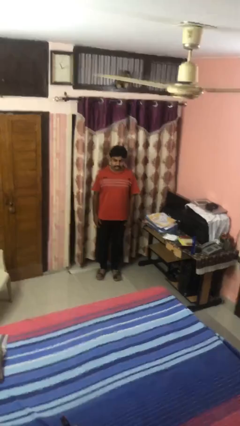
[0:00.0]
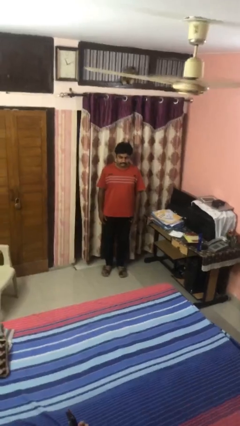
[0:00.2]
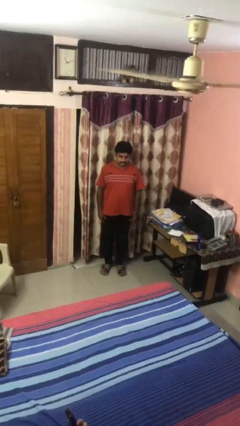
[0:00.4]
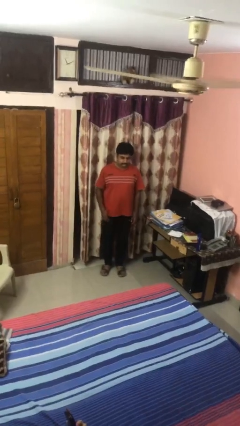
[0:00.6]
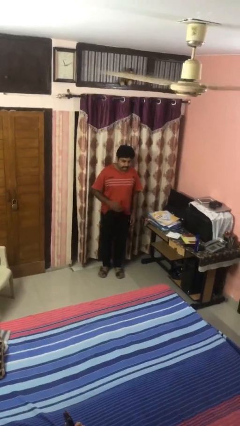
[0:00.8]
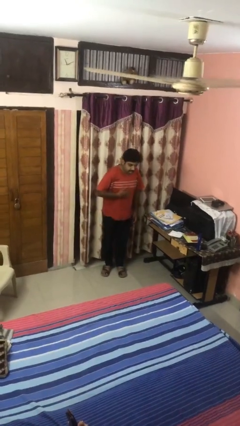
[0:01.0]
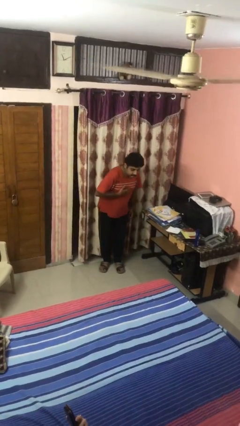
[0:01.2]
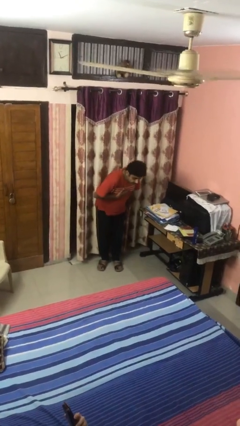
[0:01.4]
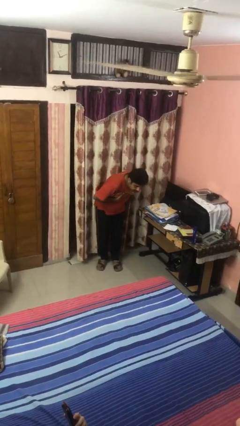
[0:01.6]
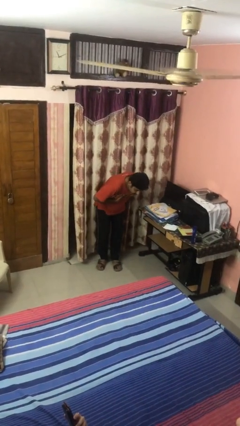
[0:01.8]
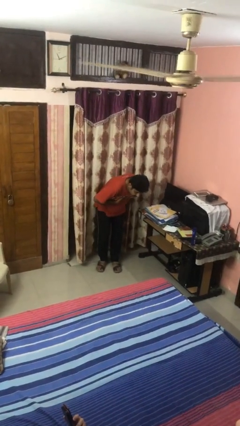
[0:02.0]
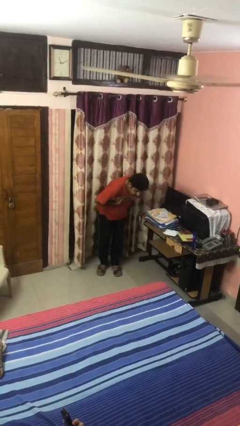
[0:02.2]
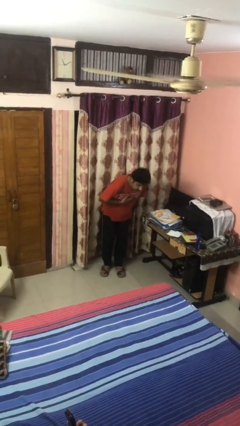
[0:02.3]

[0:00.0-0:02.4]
person bows

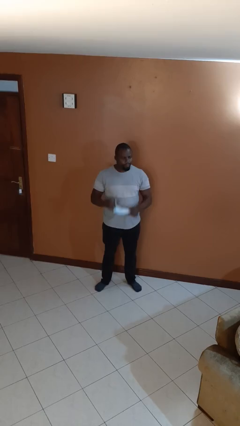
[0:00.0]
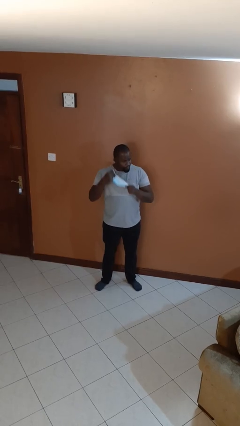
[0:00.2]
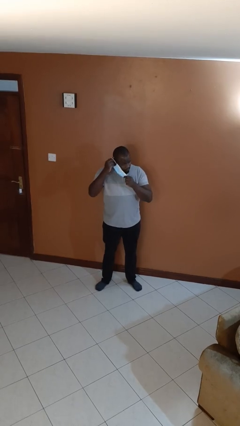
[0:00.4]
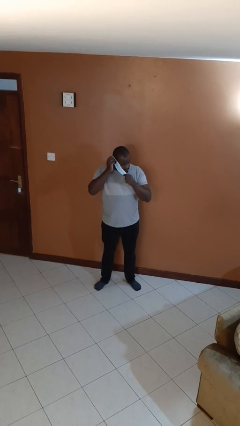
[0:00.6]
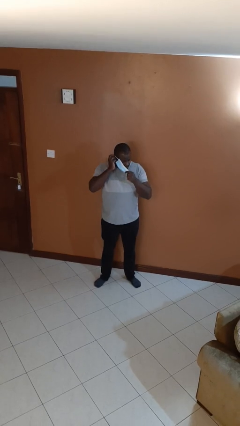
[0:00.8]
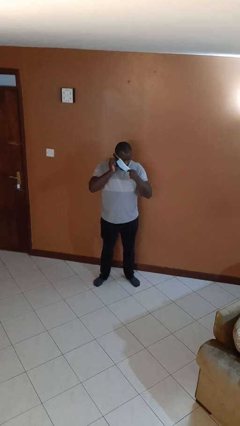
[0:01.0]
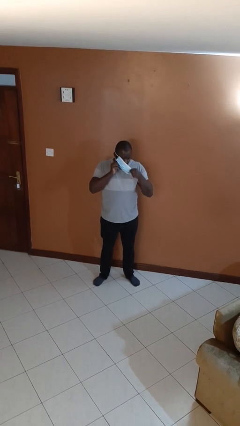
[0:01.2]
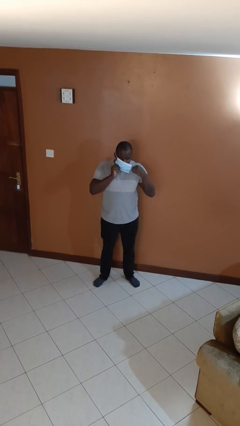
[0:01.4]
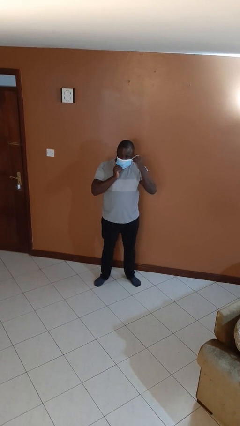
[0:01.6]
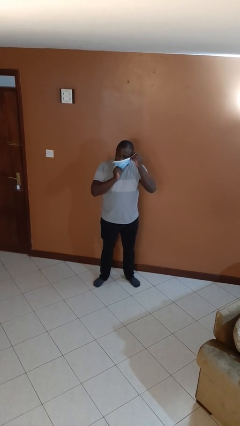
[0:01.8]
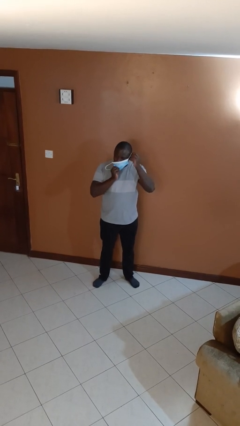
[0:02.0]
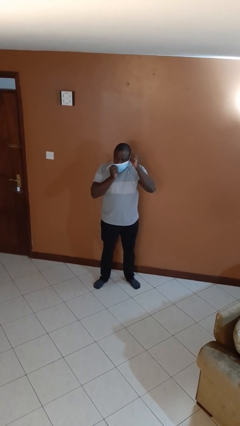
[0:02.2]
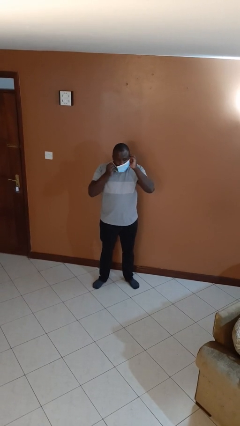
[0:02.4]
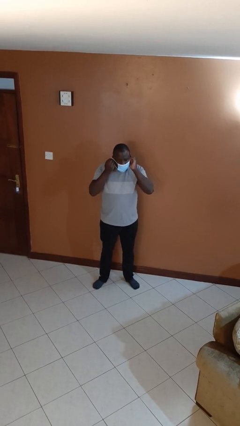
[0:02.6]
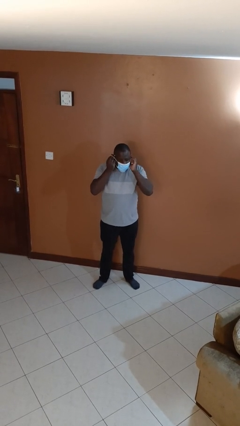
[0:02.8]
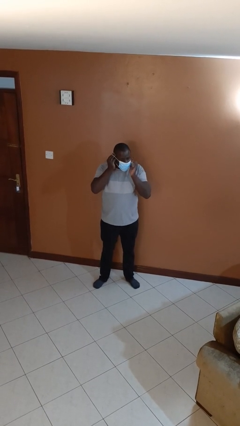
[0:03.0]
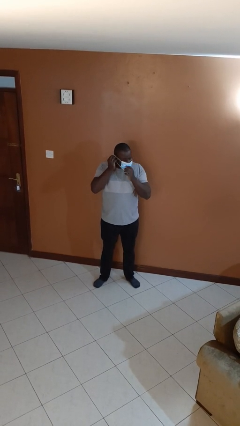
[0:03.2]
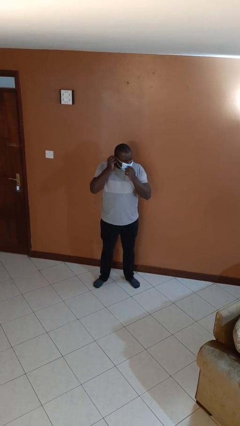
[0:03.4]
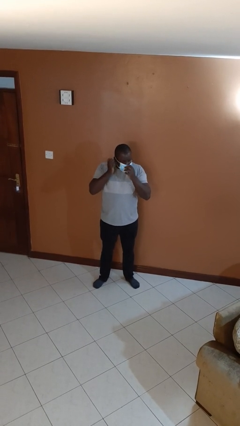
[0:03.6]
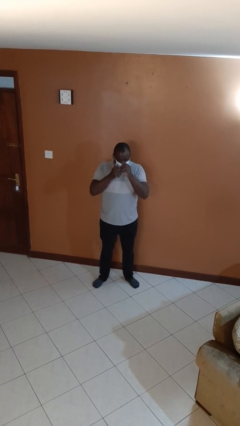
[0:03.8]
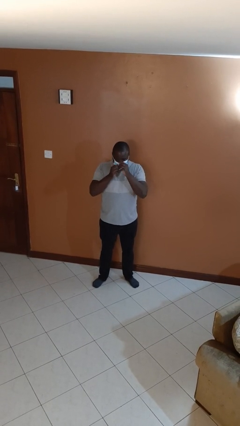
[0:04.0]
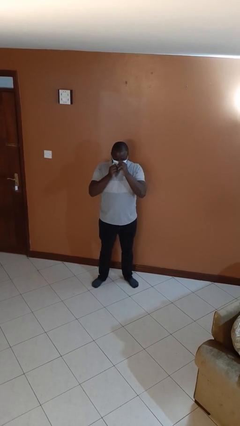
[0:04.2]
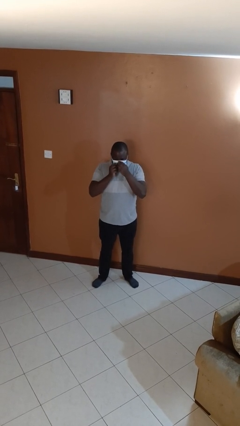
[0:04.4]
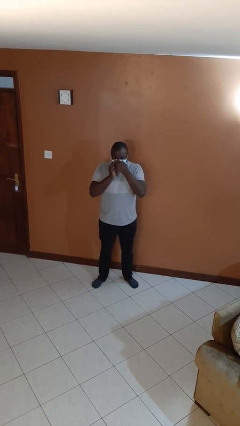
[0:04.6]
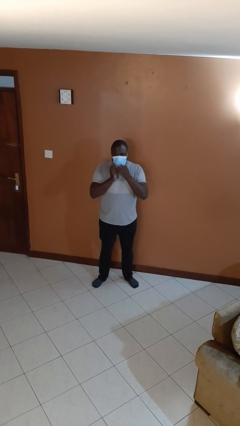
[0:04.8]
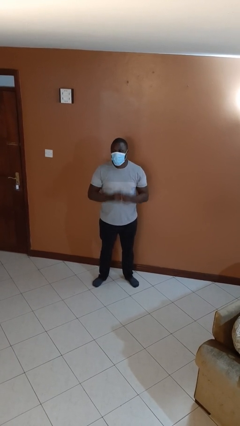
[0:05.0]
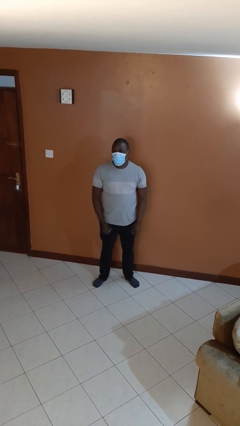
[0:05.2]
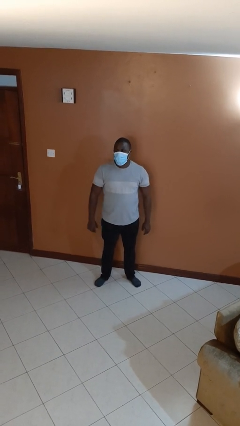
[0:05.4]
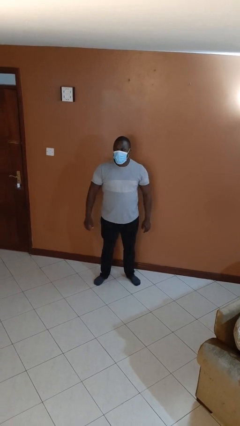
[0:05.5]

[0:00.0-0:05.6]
person puts on facemask

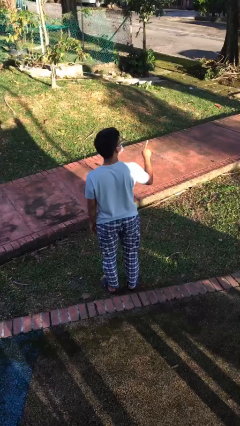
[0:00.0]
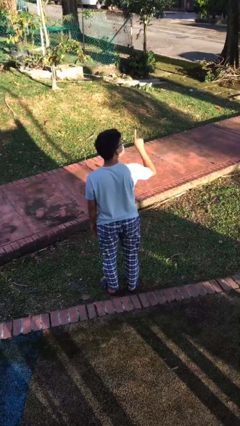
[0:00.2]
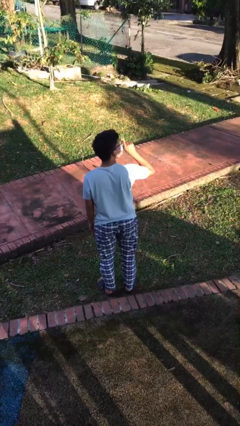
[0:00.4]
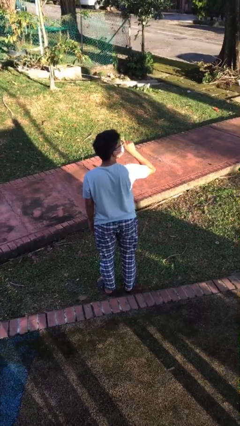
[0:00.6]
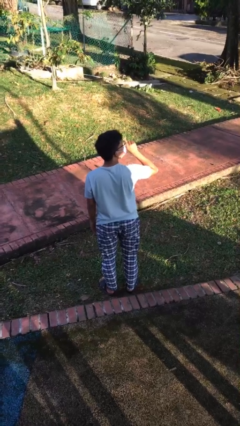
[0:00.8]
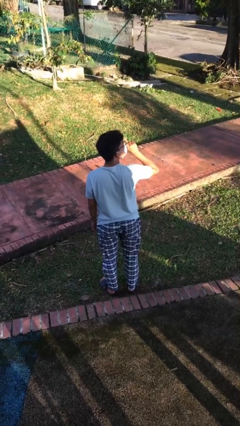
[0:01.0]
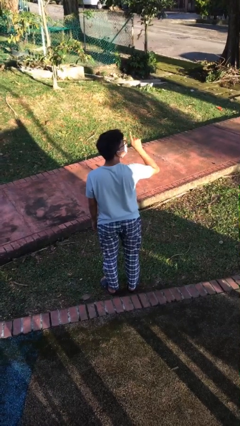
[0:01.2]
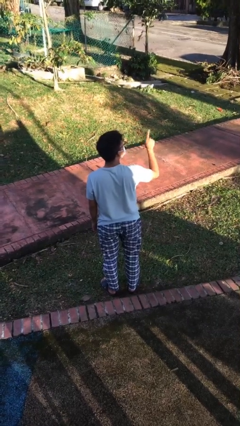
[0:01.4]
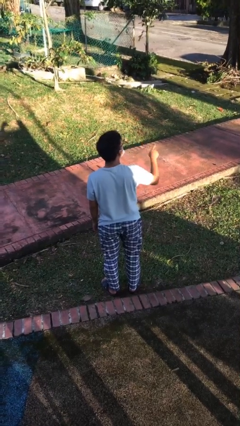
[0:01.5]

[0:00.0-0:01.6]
person gestures be quiet

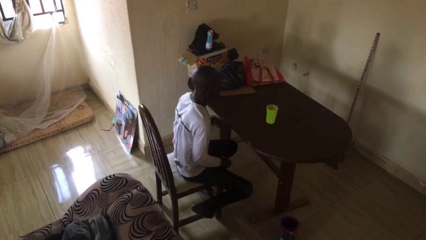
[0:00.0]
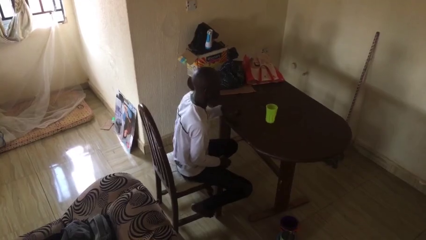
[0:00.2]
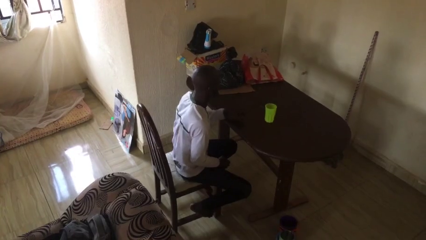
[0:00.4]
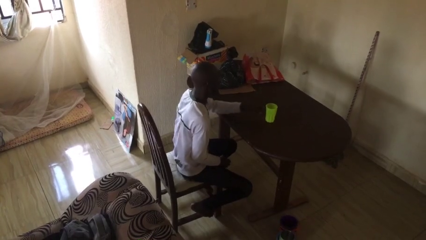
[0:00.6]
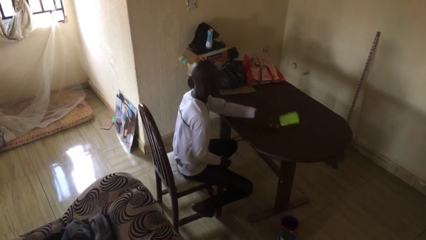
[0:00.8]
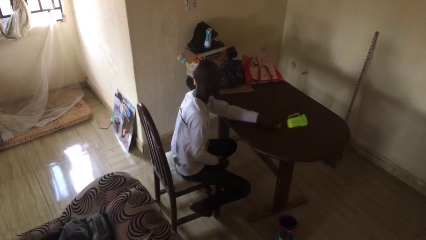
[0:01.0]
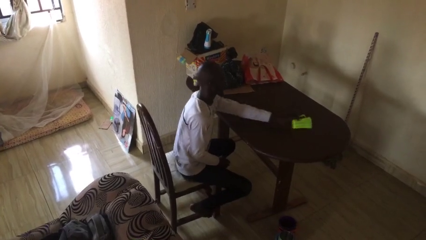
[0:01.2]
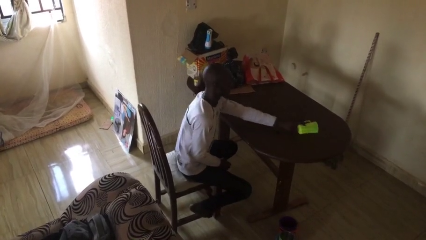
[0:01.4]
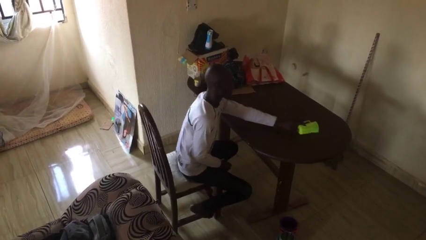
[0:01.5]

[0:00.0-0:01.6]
person knocks over glass

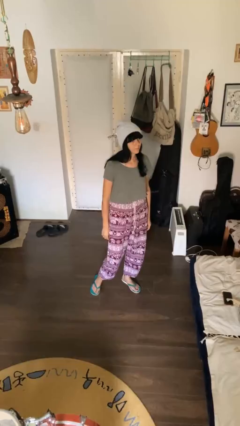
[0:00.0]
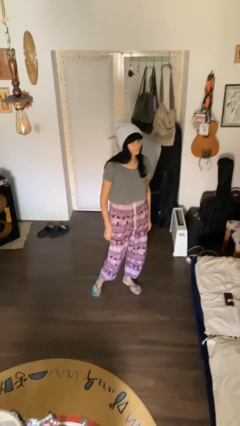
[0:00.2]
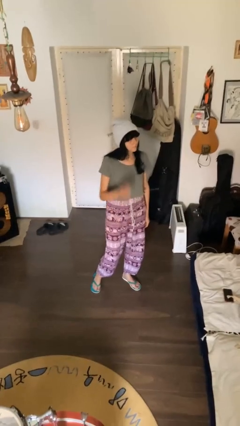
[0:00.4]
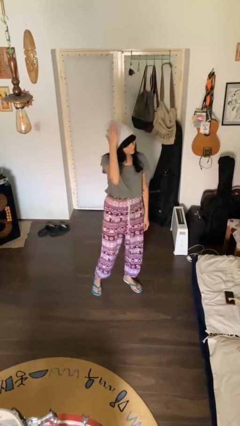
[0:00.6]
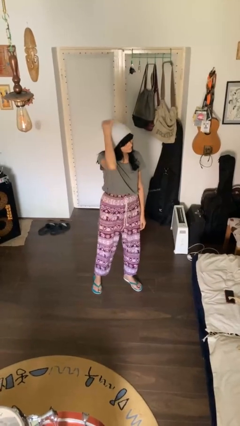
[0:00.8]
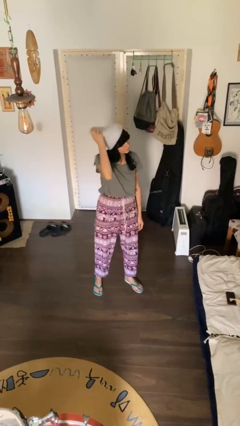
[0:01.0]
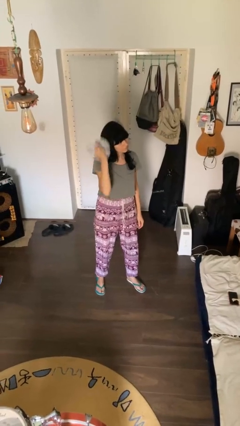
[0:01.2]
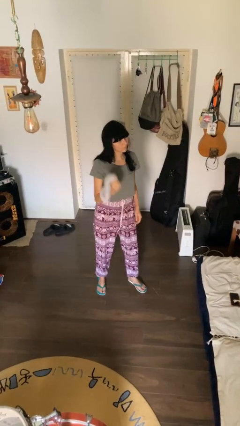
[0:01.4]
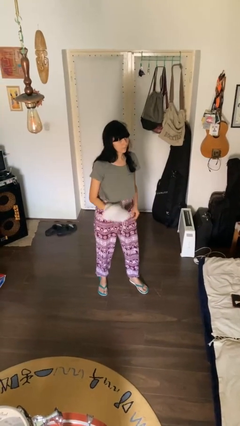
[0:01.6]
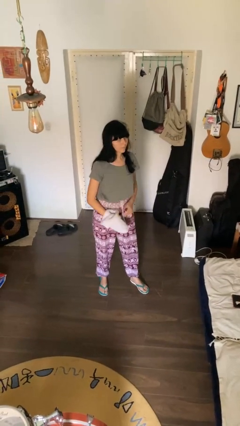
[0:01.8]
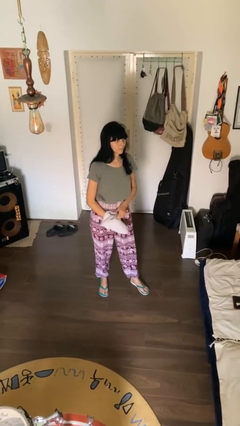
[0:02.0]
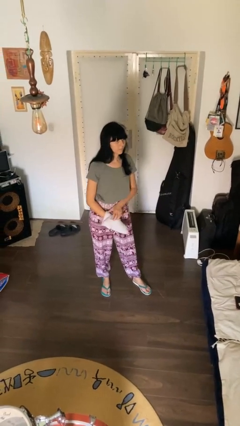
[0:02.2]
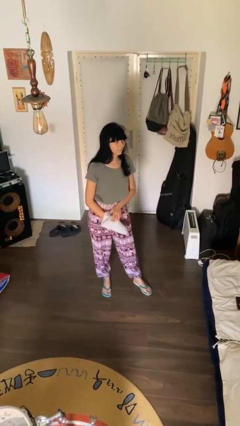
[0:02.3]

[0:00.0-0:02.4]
person takes off hat

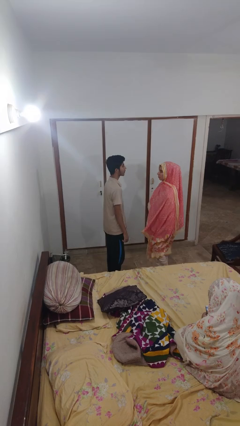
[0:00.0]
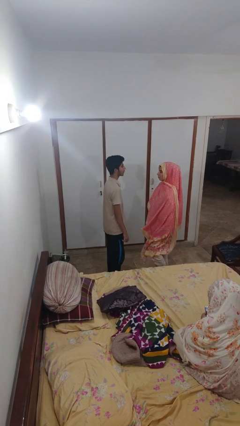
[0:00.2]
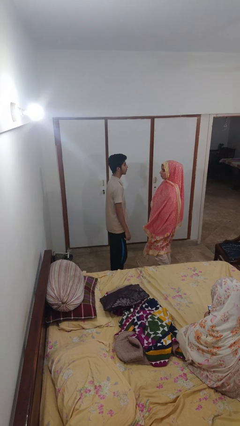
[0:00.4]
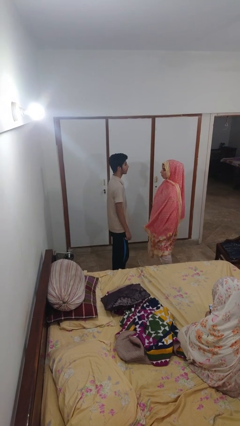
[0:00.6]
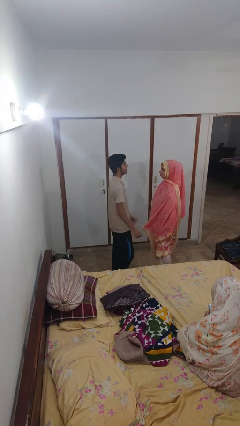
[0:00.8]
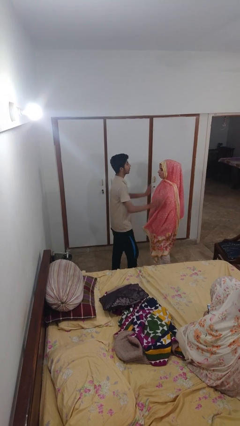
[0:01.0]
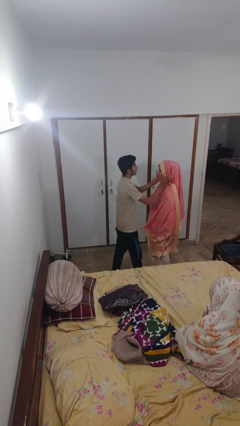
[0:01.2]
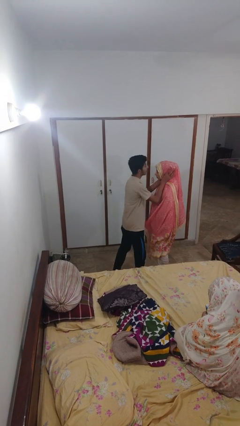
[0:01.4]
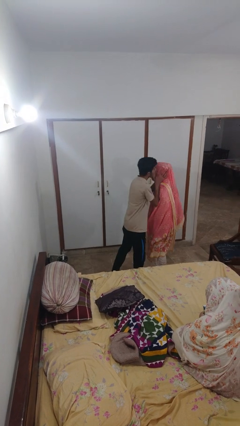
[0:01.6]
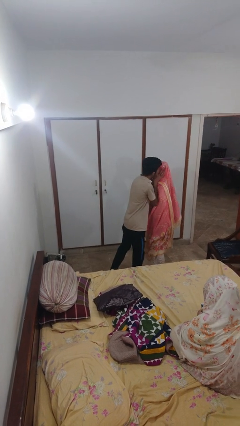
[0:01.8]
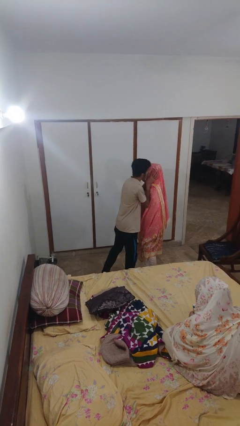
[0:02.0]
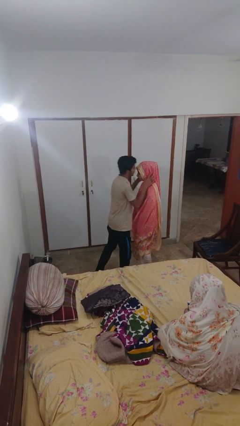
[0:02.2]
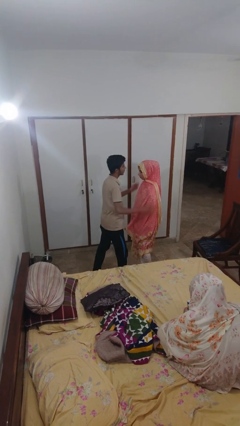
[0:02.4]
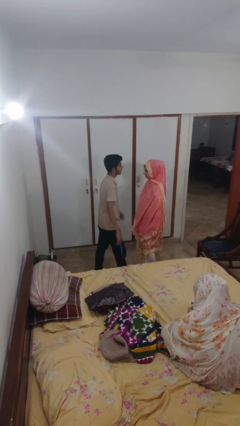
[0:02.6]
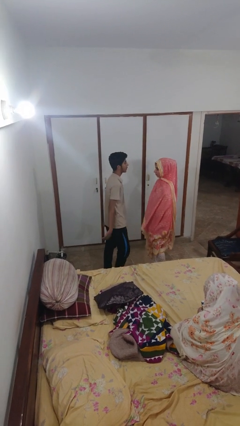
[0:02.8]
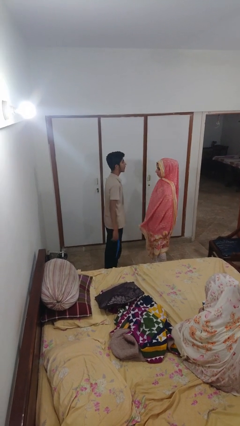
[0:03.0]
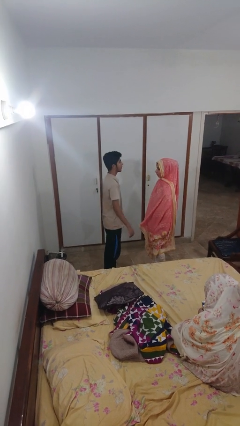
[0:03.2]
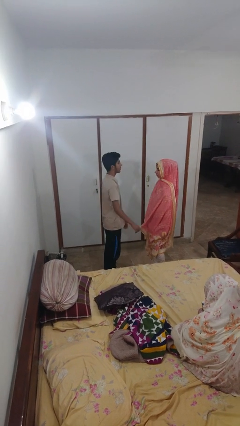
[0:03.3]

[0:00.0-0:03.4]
person kisses cheek of person

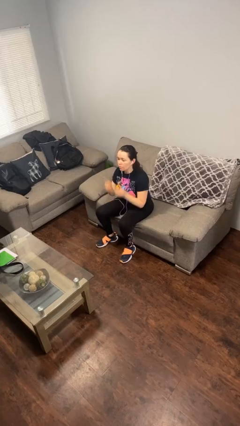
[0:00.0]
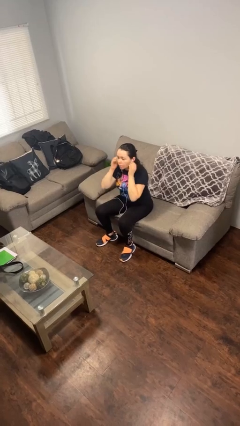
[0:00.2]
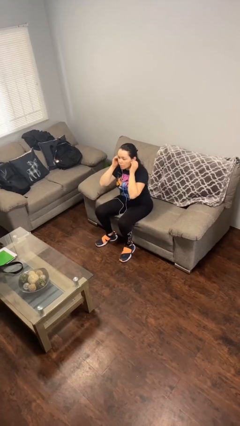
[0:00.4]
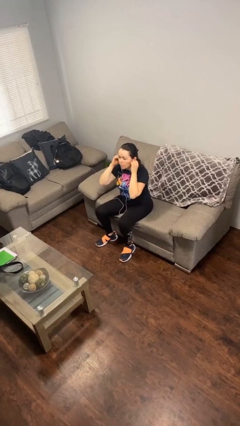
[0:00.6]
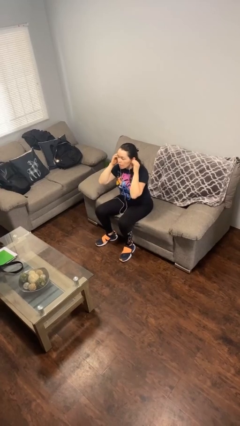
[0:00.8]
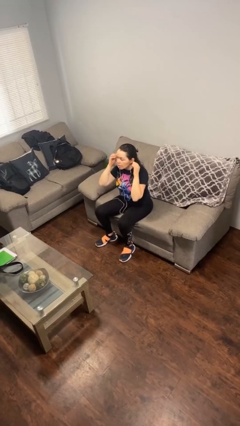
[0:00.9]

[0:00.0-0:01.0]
person takes off headphones
